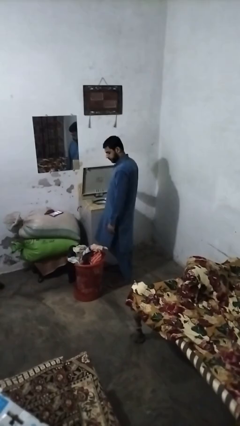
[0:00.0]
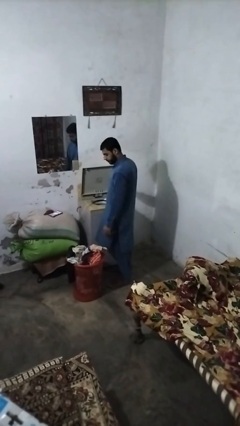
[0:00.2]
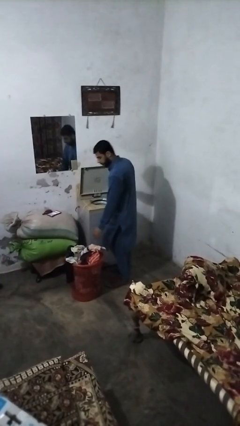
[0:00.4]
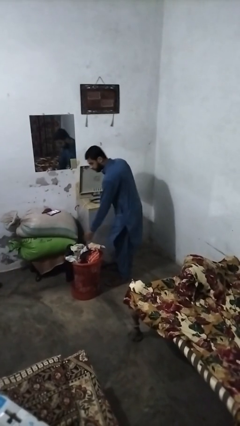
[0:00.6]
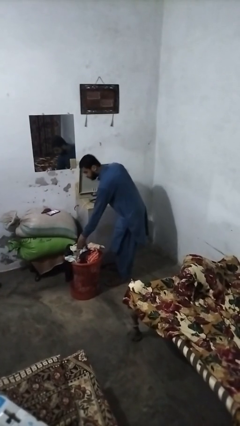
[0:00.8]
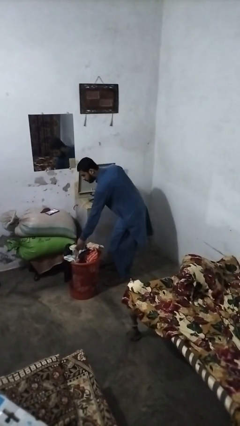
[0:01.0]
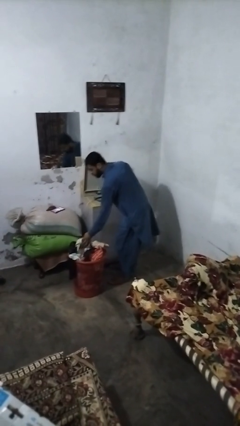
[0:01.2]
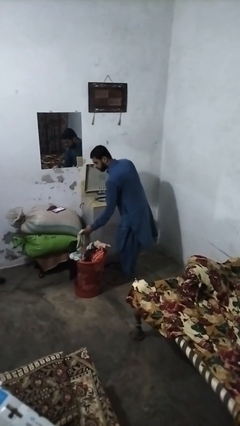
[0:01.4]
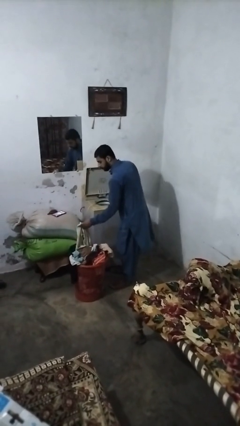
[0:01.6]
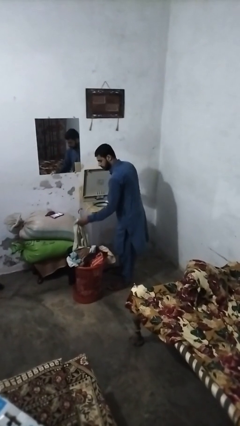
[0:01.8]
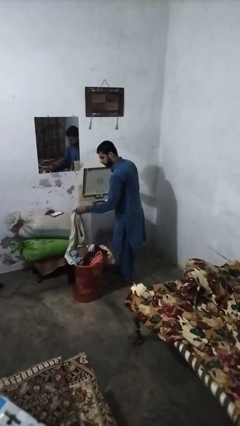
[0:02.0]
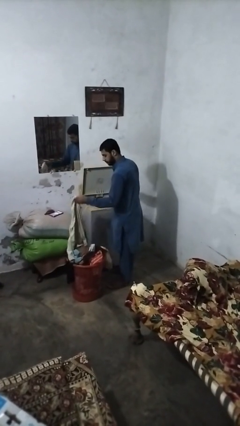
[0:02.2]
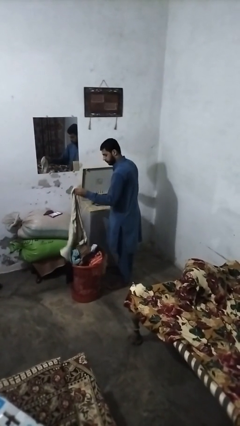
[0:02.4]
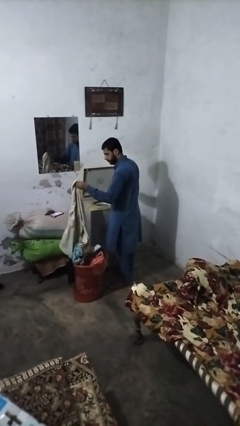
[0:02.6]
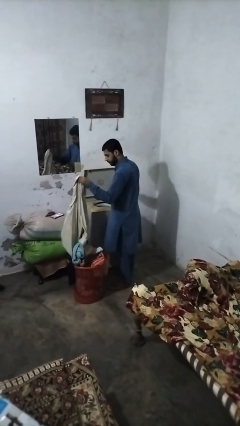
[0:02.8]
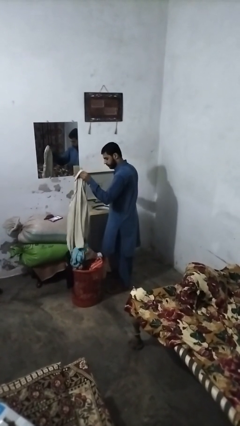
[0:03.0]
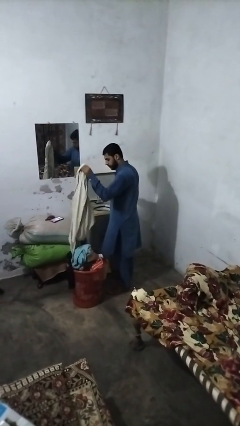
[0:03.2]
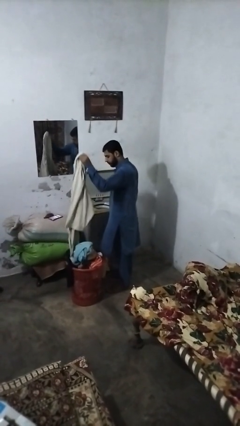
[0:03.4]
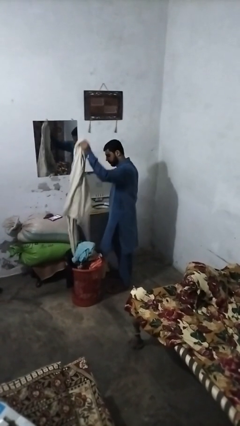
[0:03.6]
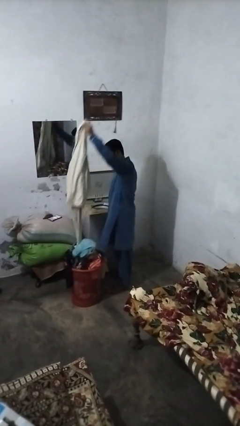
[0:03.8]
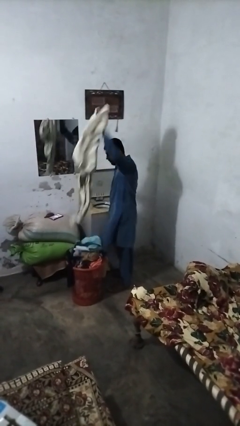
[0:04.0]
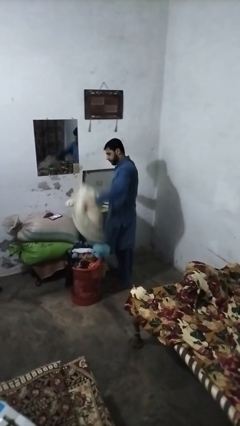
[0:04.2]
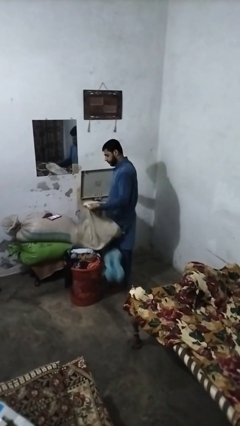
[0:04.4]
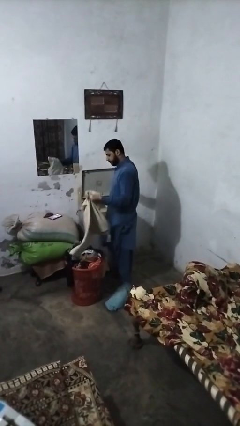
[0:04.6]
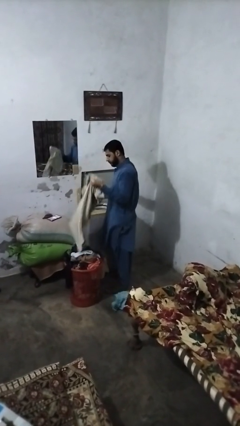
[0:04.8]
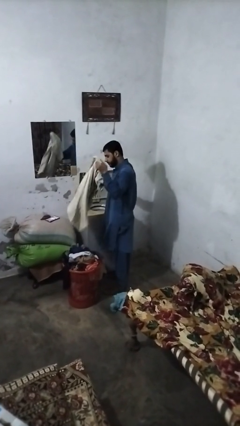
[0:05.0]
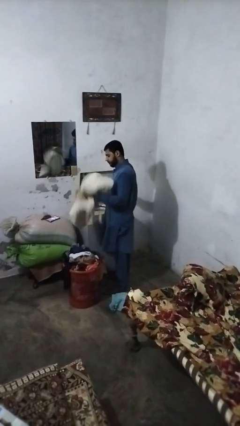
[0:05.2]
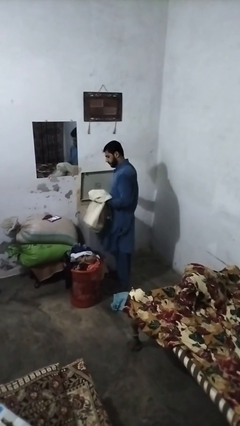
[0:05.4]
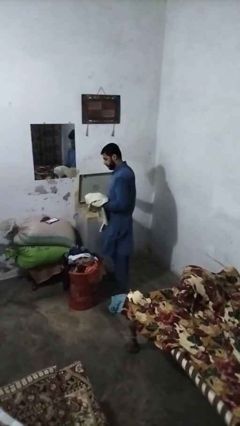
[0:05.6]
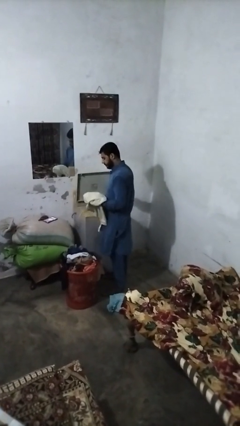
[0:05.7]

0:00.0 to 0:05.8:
person unloads clotheswasher

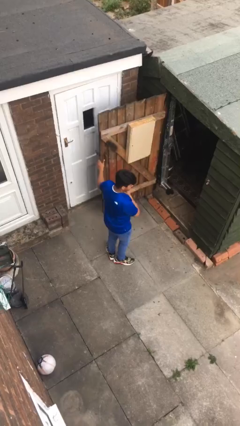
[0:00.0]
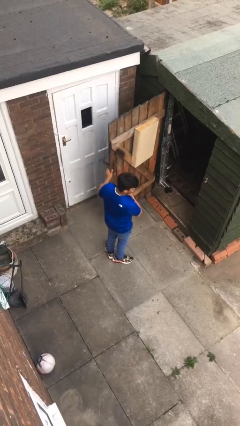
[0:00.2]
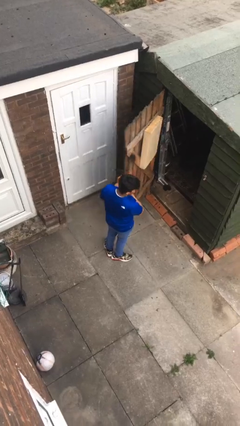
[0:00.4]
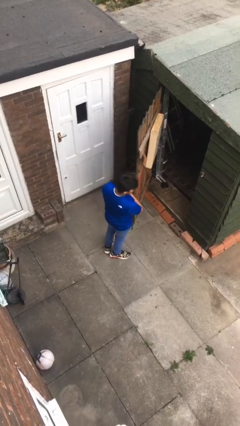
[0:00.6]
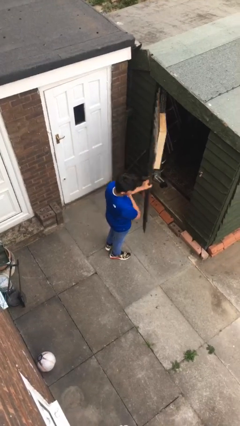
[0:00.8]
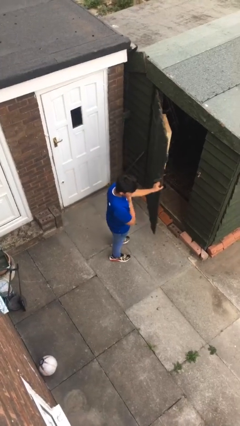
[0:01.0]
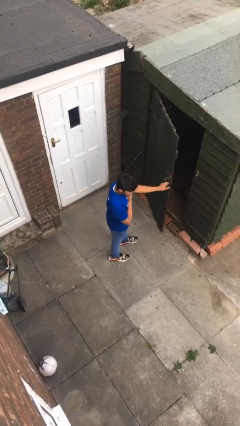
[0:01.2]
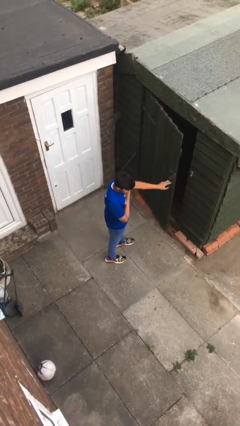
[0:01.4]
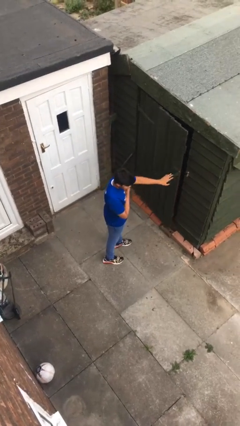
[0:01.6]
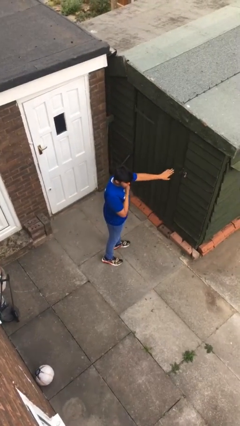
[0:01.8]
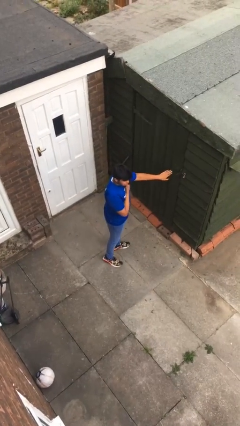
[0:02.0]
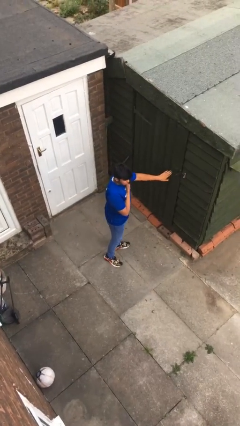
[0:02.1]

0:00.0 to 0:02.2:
person closes facility door

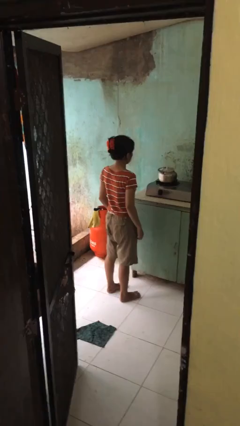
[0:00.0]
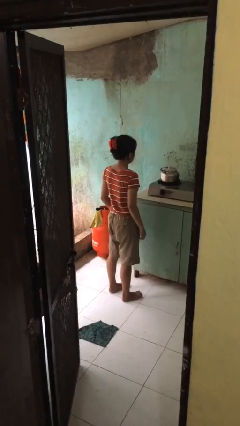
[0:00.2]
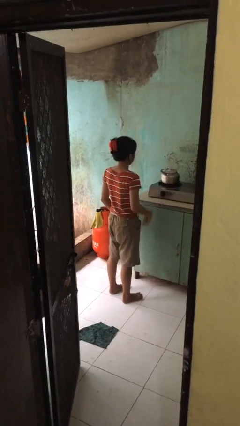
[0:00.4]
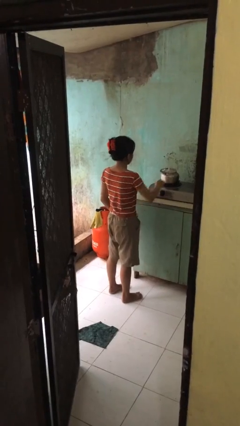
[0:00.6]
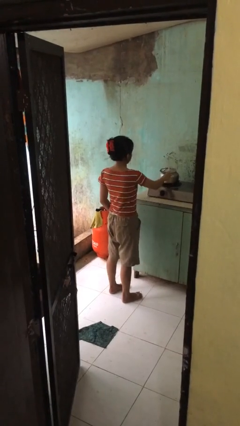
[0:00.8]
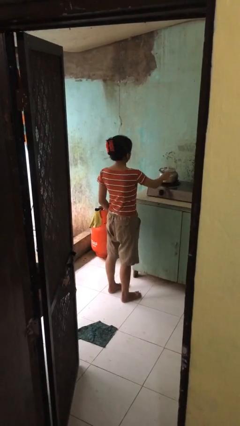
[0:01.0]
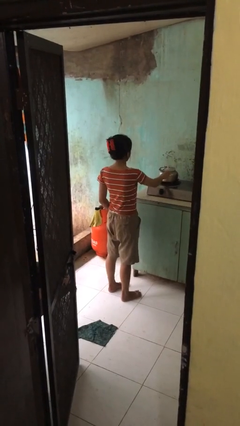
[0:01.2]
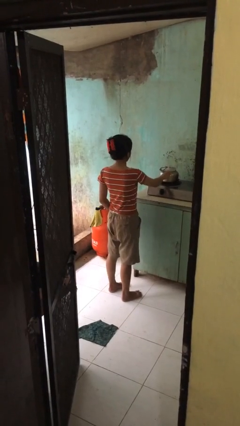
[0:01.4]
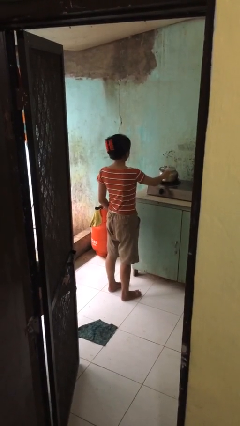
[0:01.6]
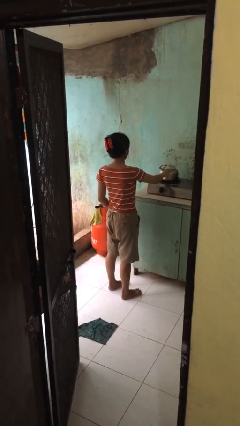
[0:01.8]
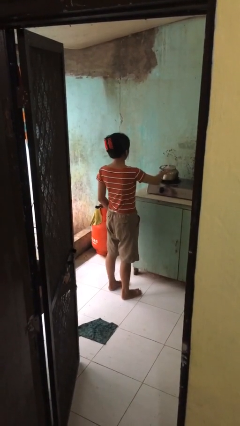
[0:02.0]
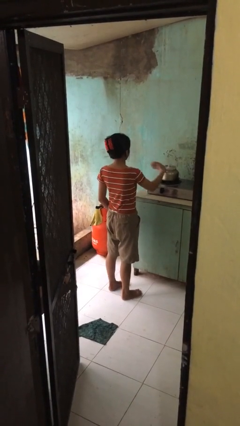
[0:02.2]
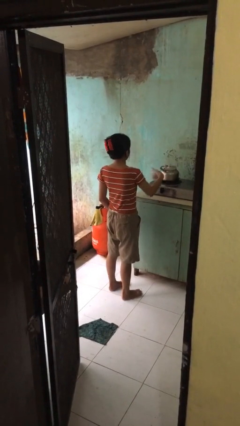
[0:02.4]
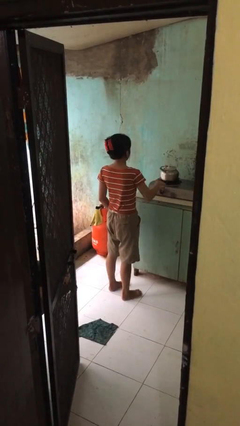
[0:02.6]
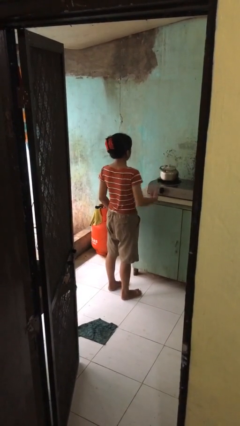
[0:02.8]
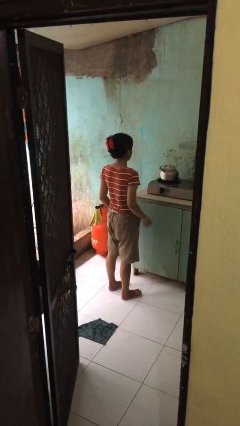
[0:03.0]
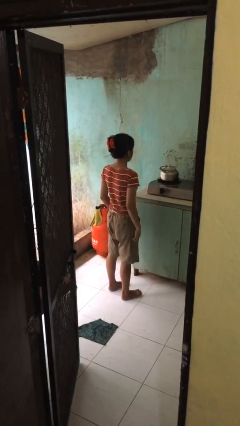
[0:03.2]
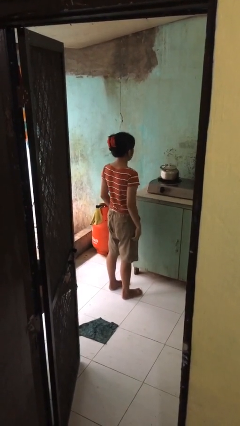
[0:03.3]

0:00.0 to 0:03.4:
person burns hand

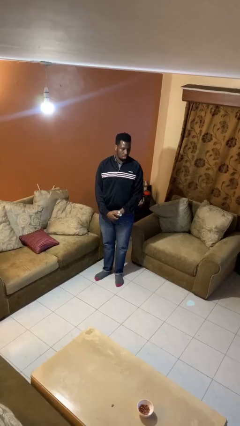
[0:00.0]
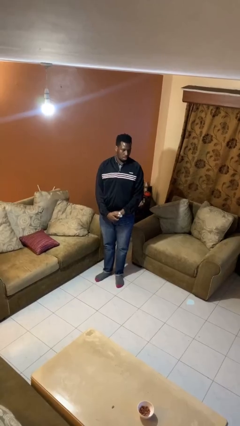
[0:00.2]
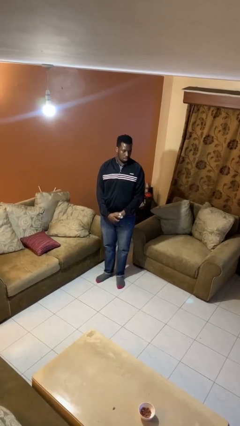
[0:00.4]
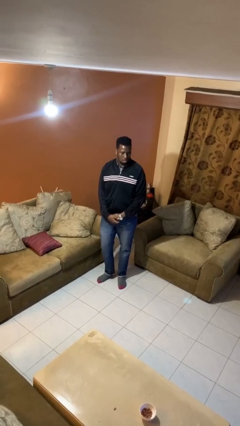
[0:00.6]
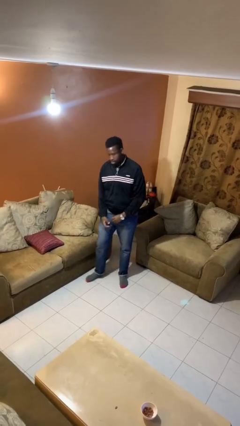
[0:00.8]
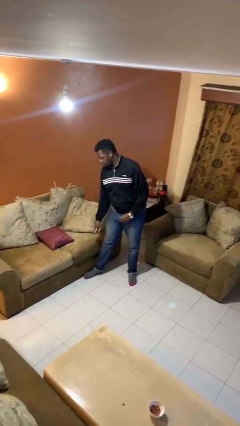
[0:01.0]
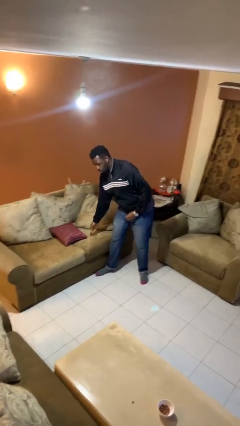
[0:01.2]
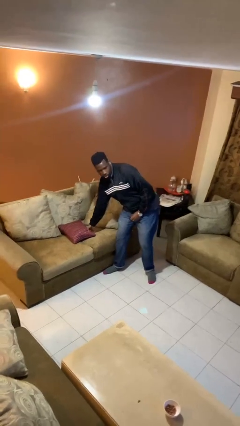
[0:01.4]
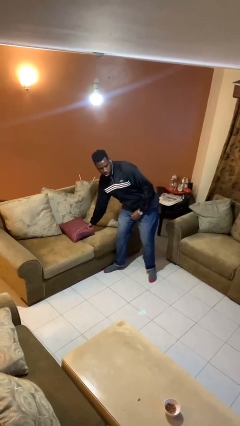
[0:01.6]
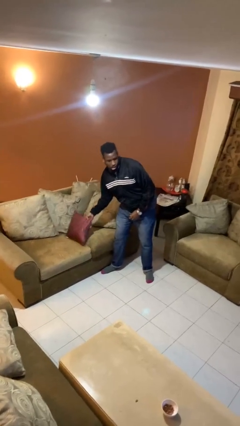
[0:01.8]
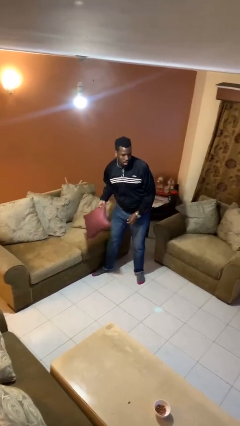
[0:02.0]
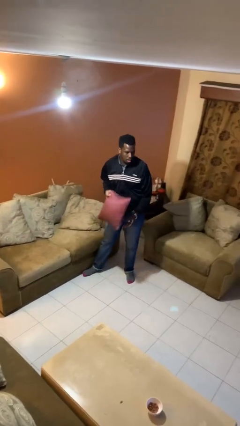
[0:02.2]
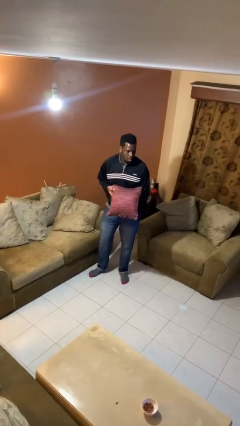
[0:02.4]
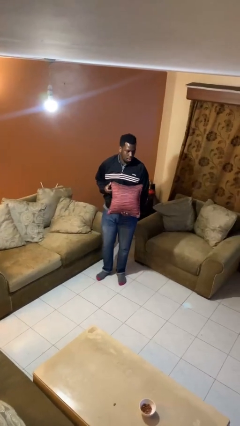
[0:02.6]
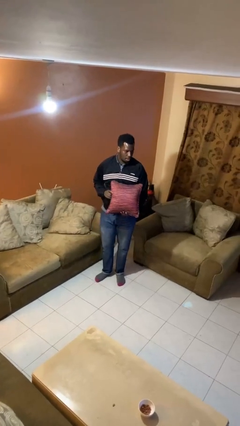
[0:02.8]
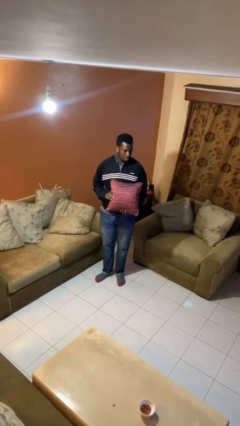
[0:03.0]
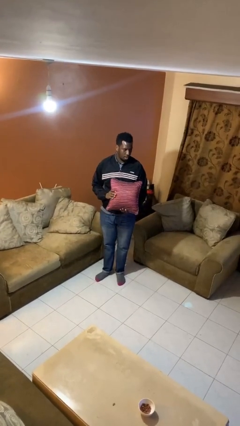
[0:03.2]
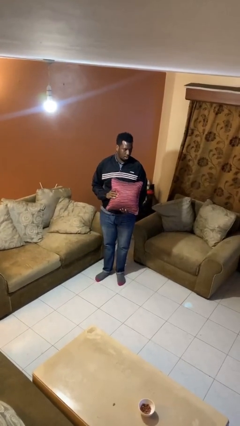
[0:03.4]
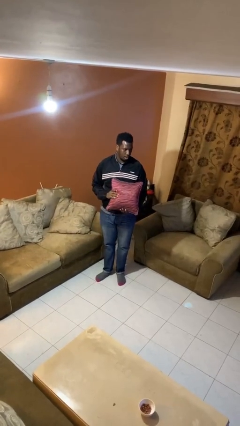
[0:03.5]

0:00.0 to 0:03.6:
person picks up object from couch

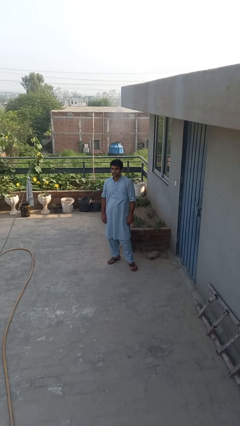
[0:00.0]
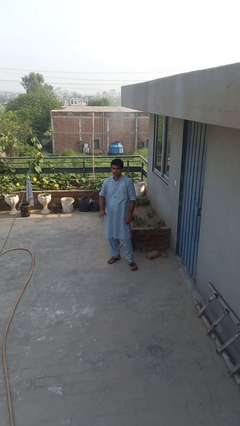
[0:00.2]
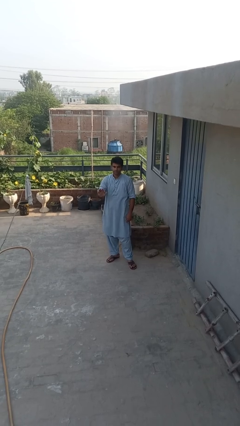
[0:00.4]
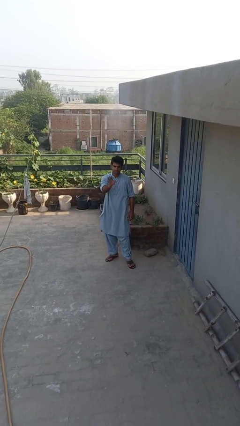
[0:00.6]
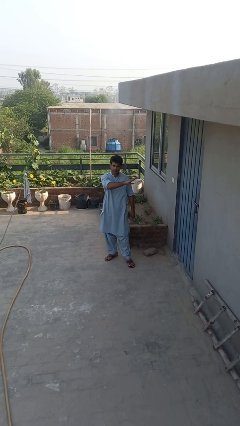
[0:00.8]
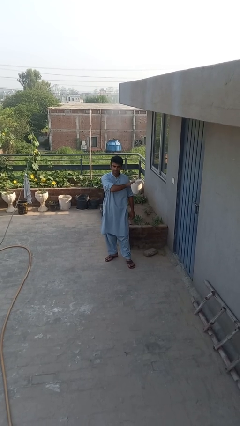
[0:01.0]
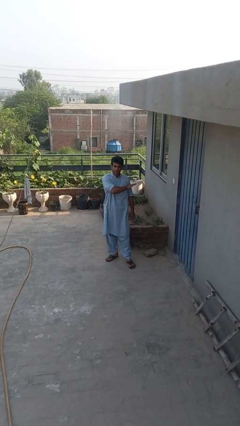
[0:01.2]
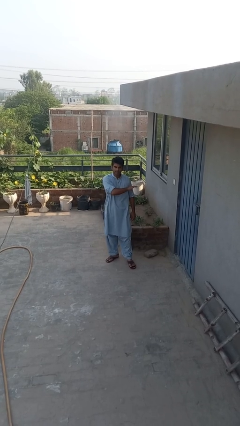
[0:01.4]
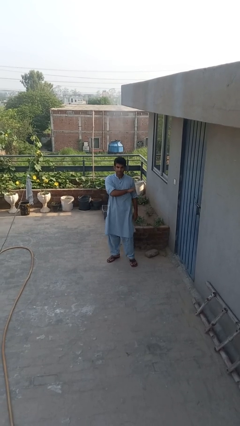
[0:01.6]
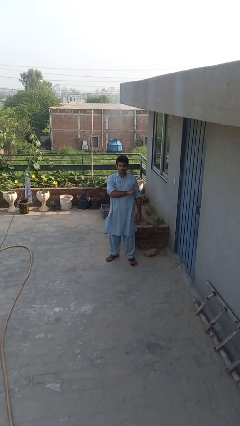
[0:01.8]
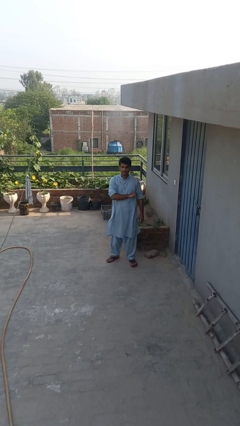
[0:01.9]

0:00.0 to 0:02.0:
person gestures swipe left

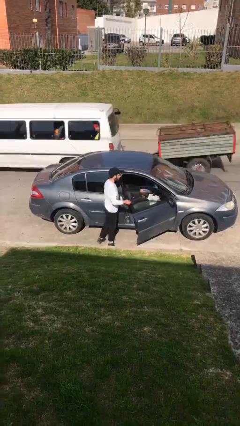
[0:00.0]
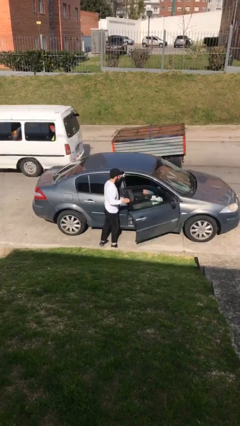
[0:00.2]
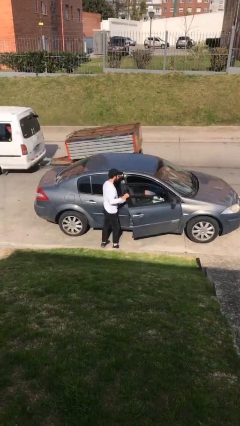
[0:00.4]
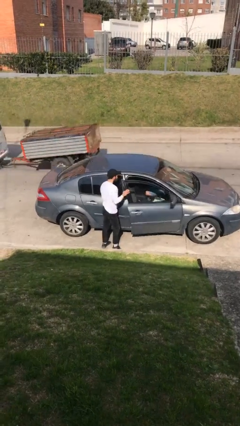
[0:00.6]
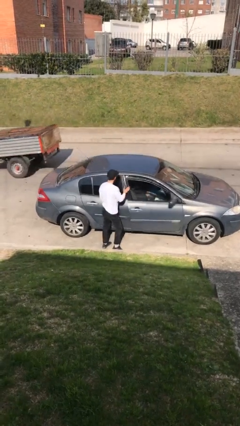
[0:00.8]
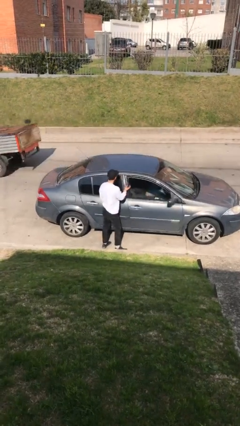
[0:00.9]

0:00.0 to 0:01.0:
person closes car door
